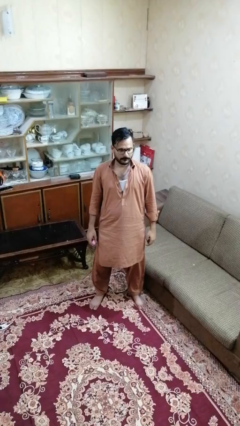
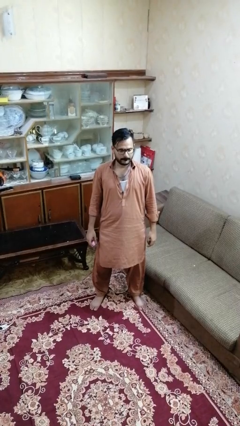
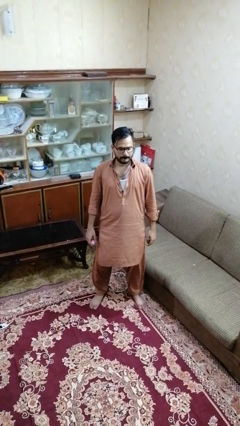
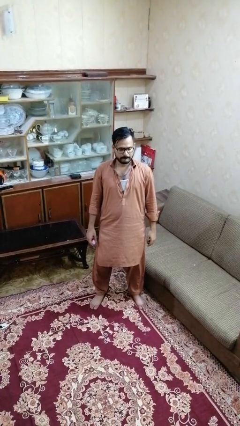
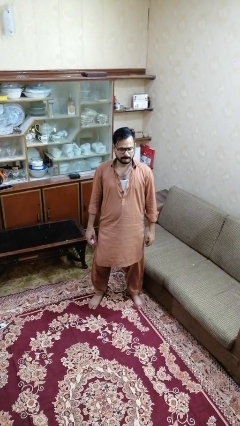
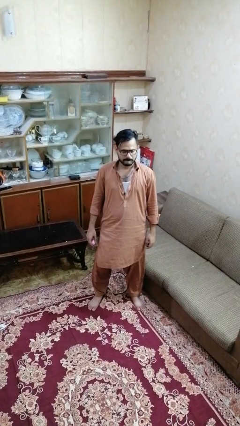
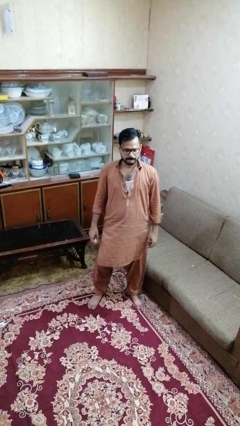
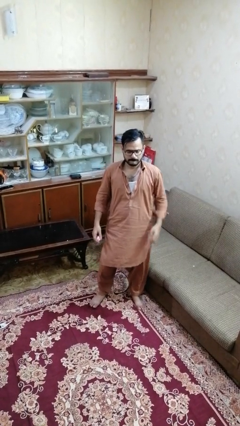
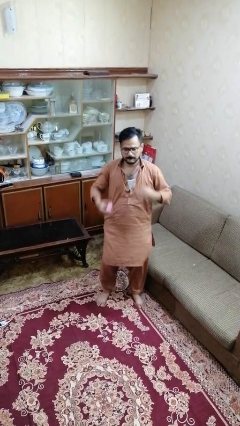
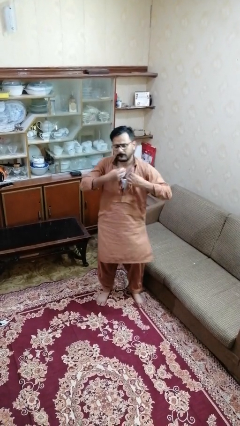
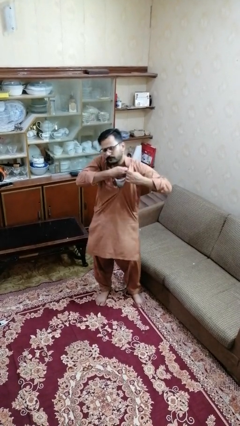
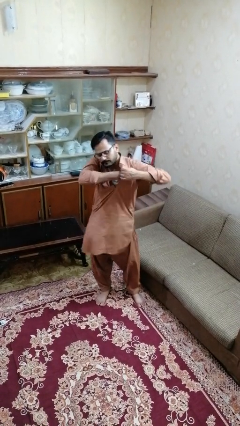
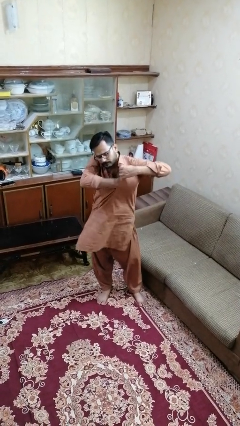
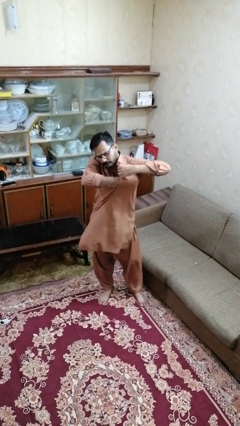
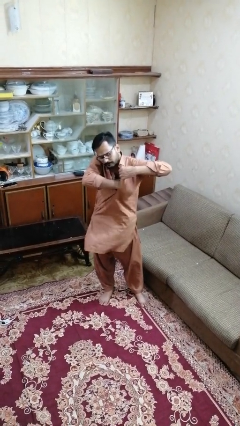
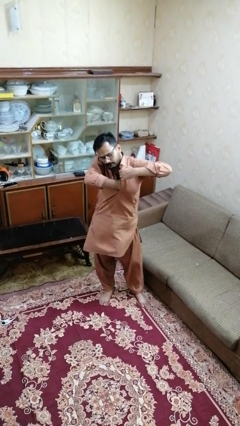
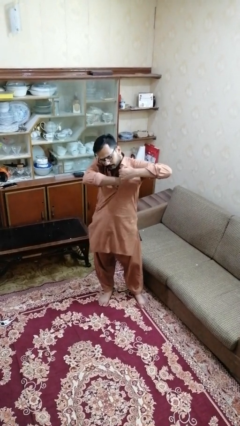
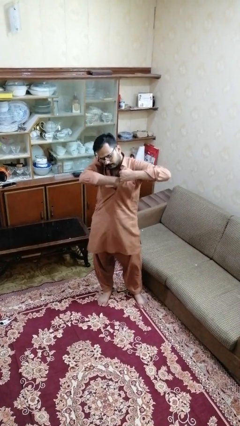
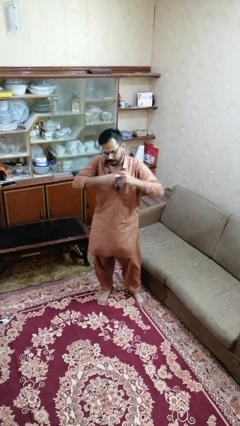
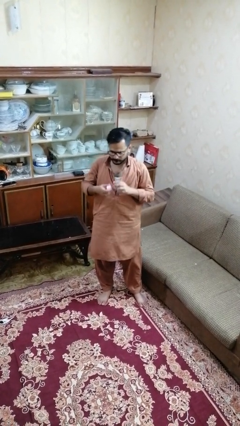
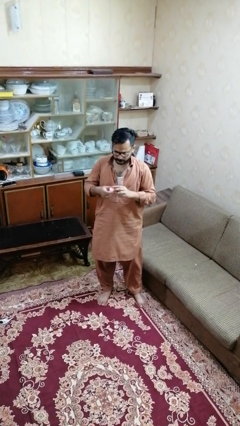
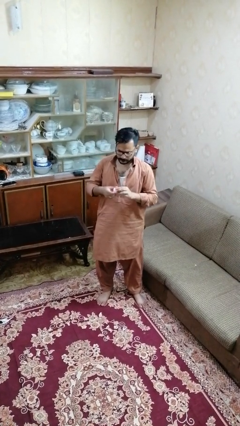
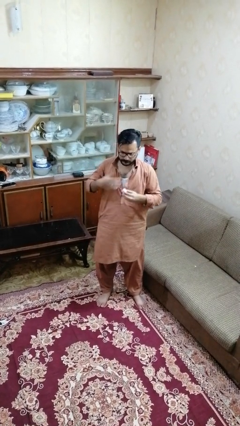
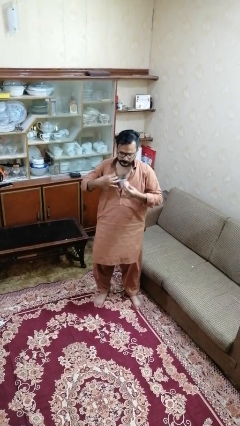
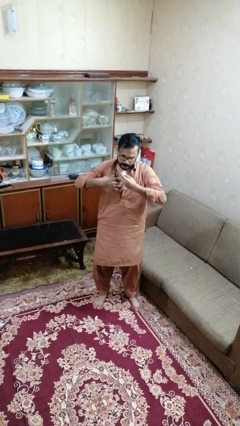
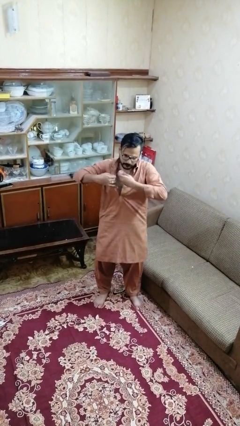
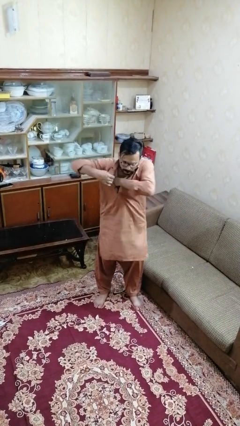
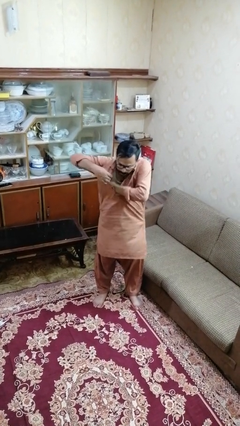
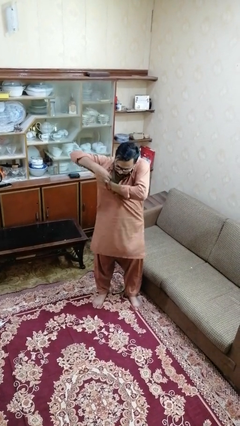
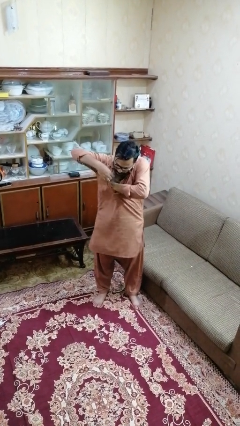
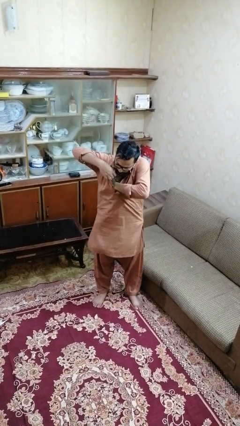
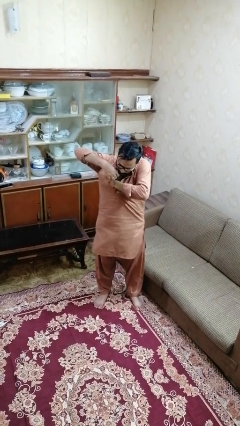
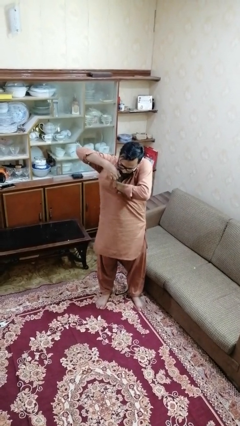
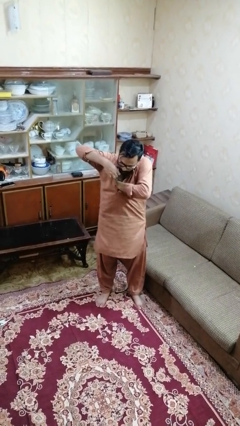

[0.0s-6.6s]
person applies deodorant

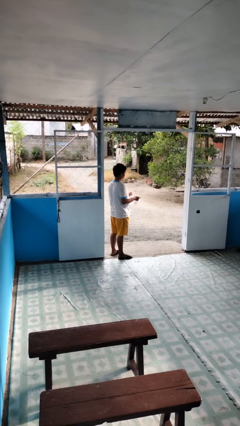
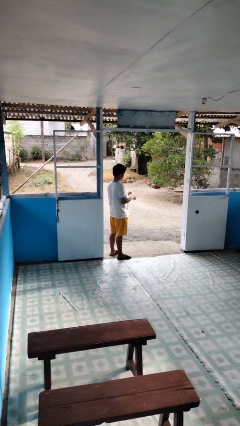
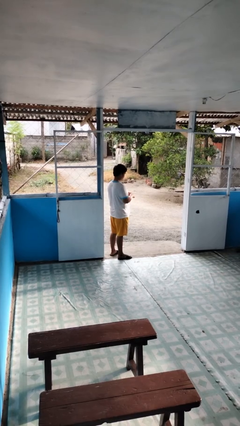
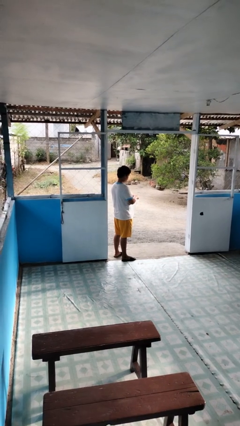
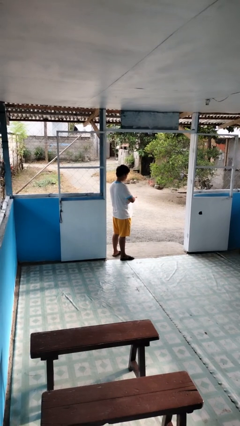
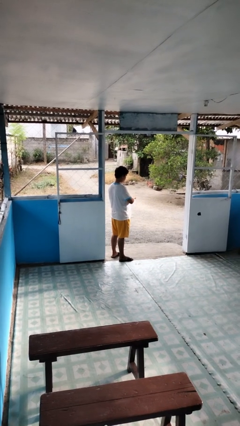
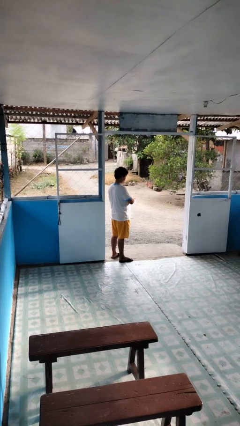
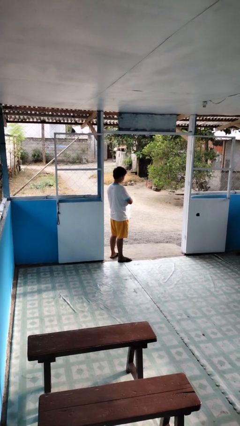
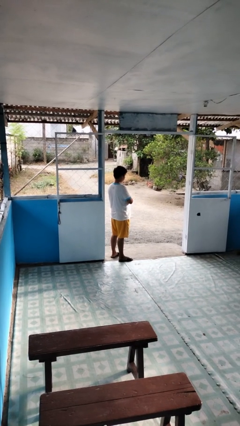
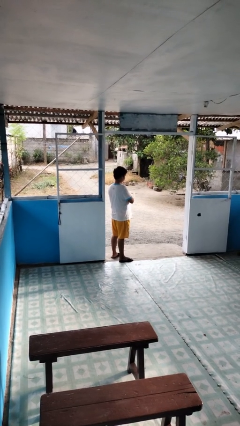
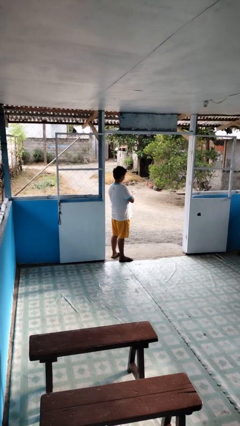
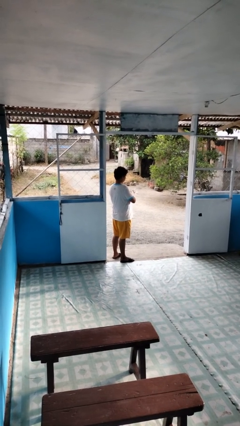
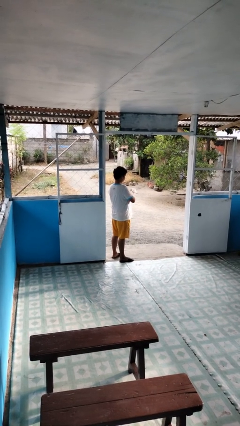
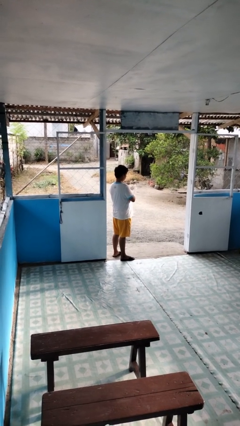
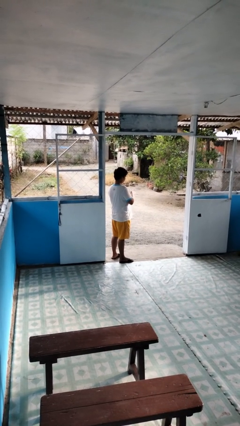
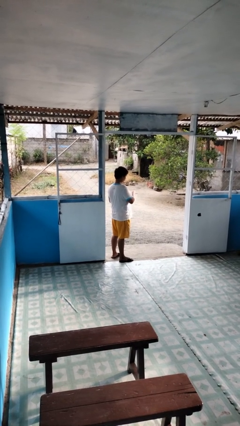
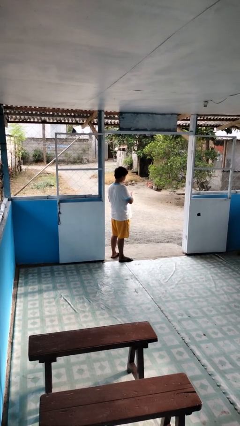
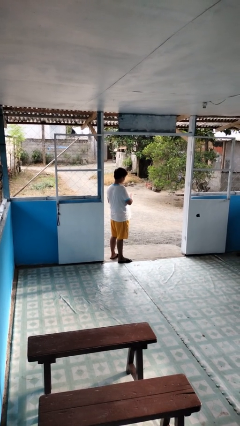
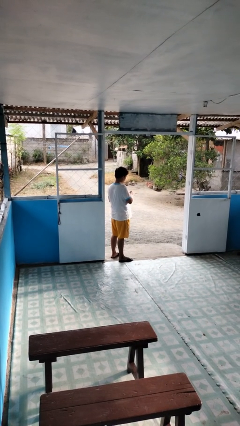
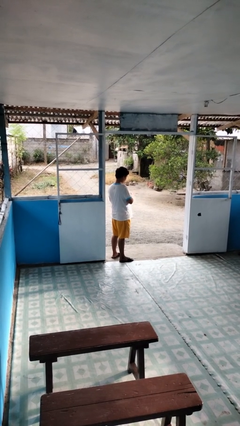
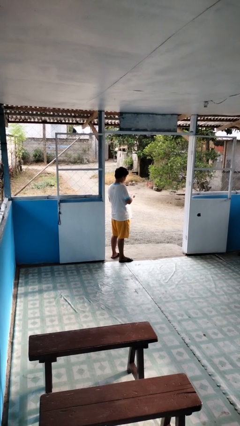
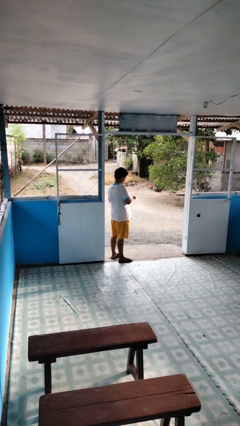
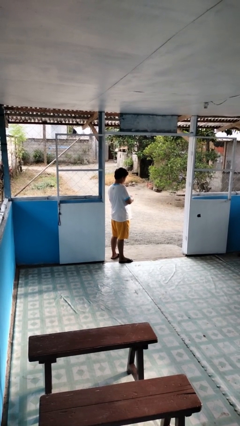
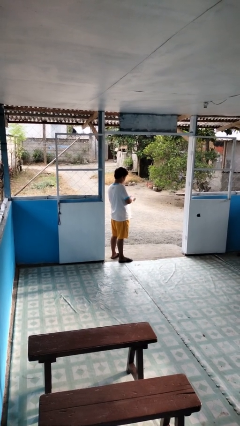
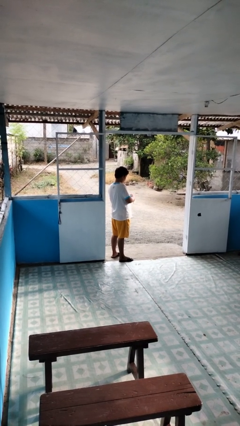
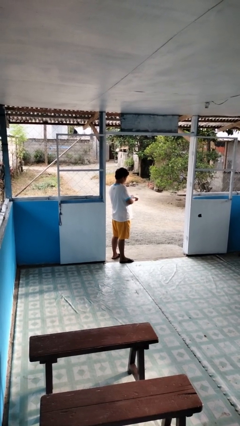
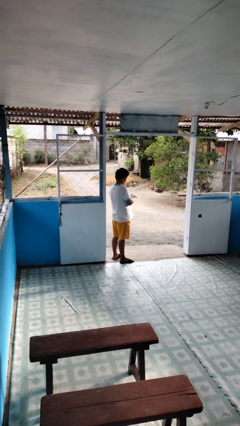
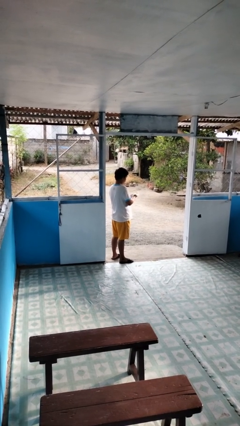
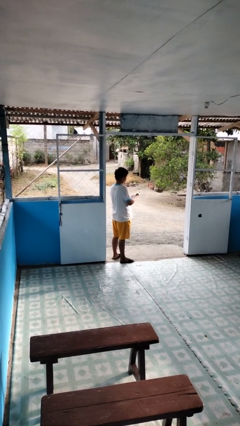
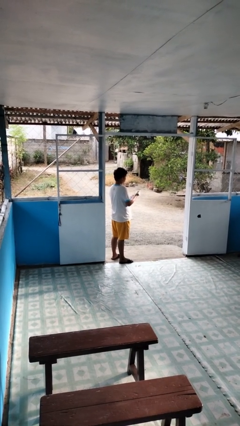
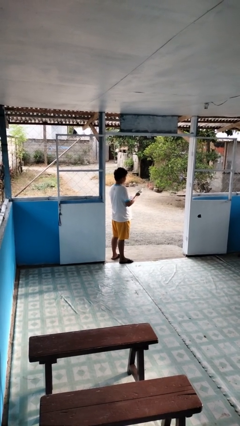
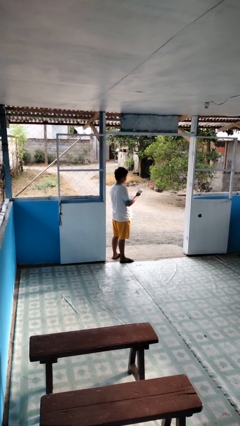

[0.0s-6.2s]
person puts on gloves

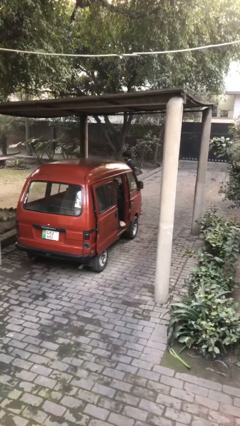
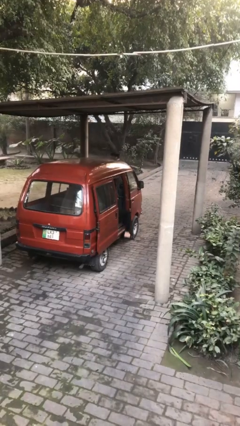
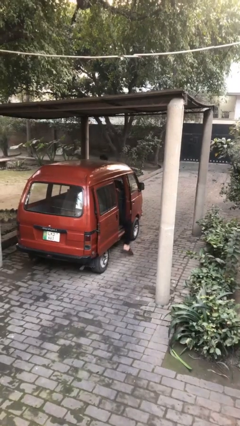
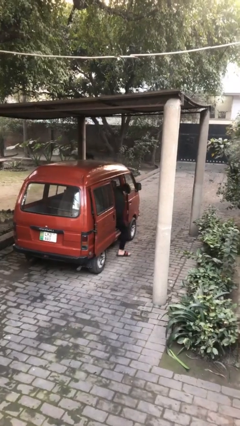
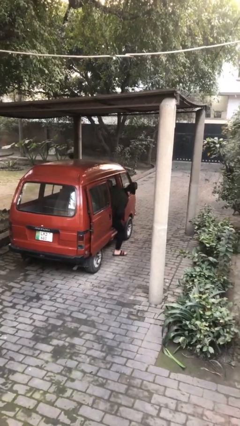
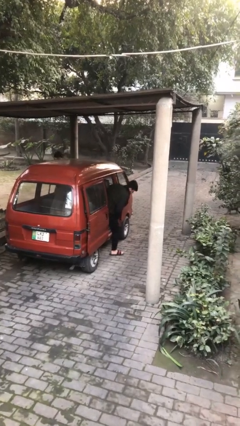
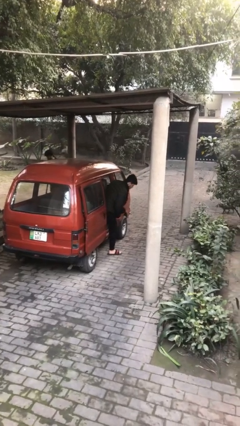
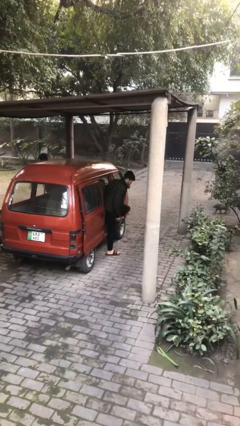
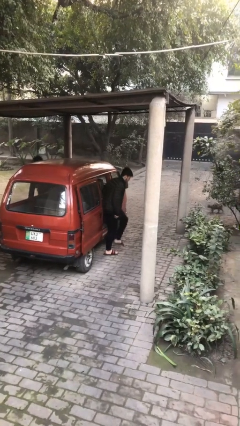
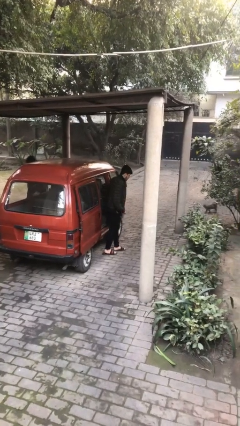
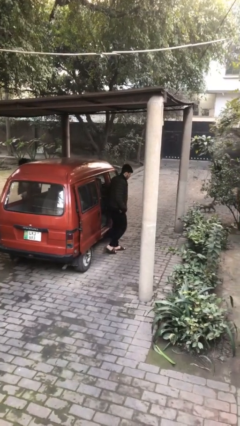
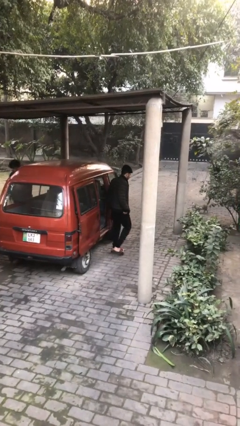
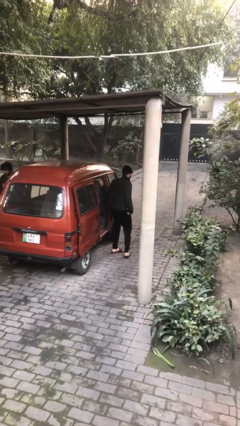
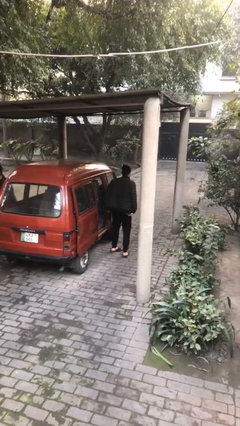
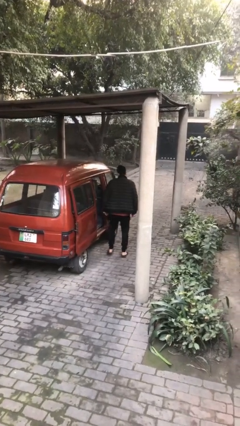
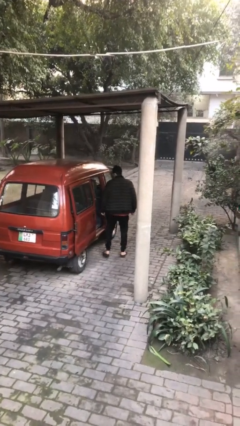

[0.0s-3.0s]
person exits car

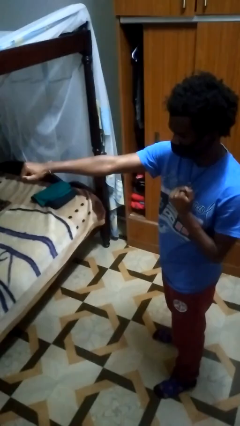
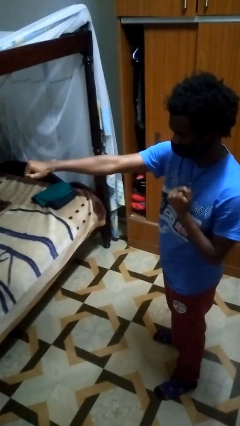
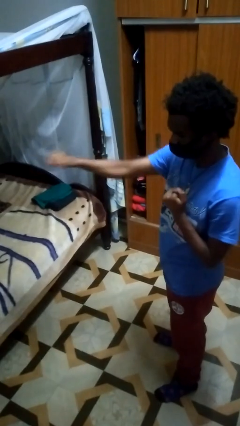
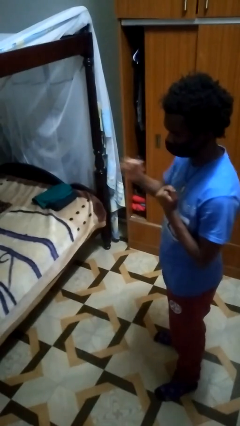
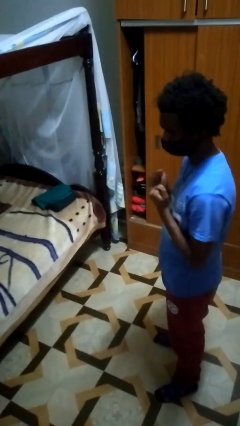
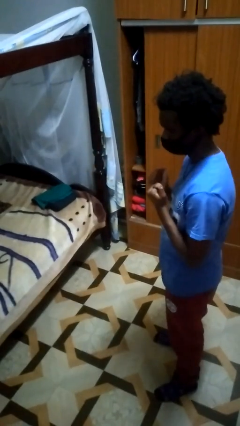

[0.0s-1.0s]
person punches

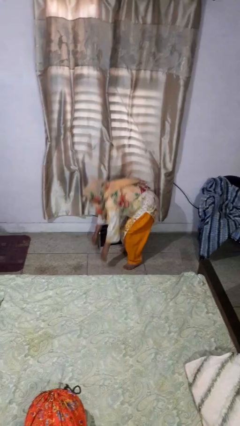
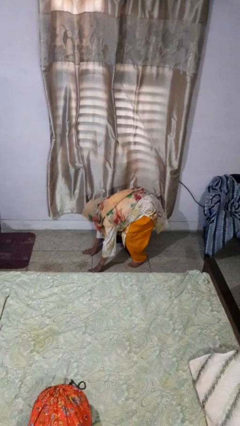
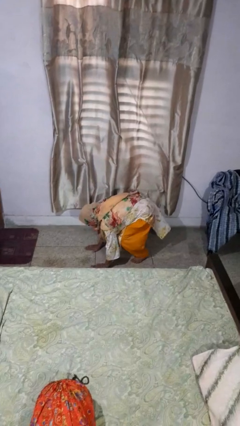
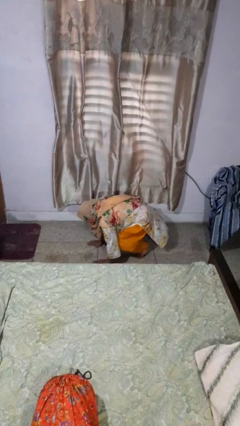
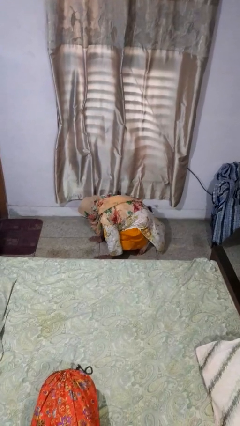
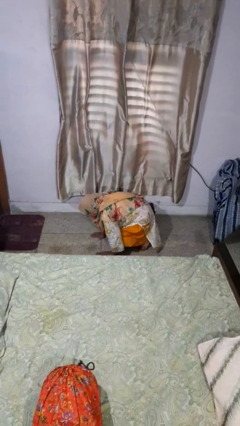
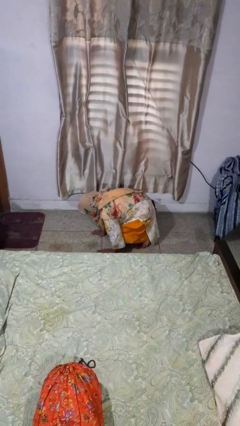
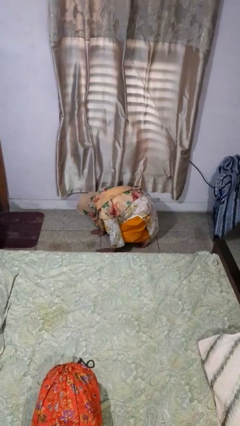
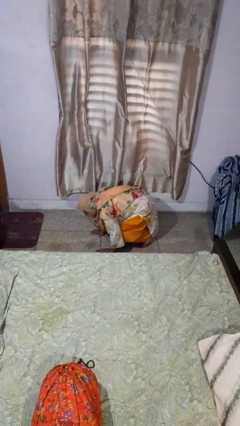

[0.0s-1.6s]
person lies down on floor
